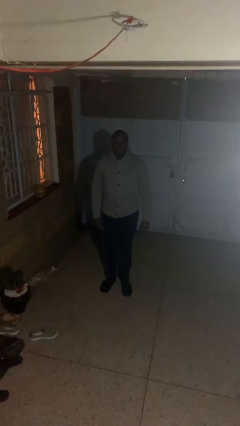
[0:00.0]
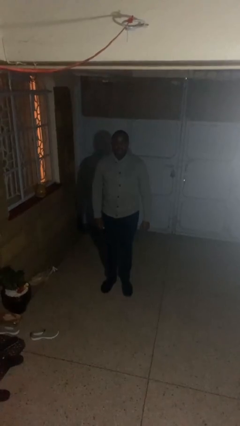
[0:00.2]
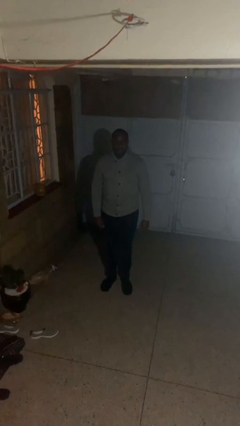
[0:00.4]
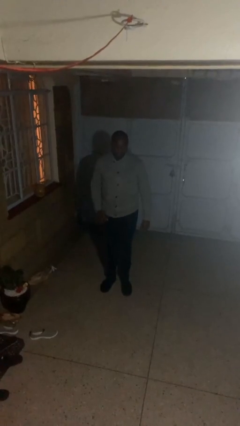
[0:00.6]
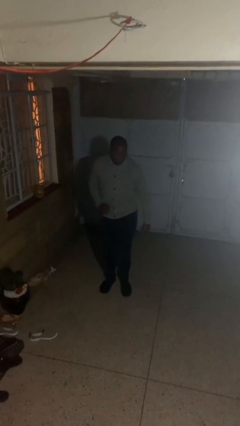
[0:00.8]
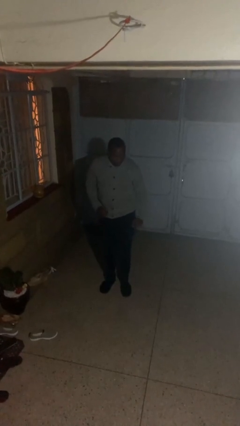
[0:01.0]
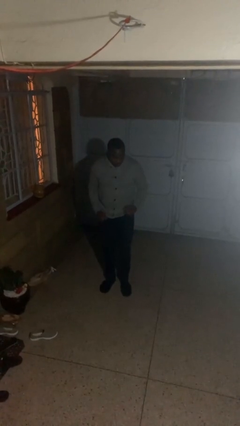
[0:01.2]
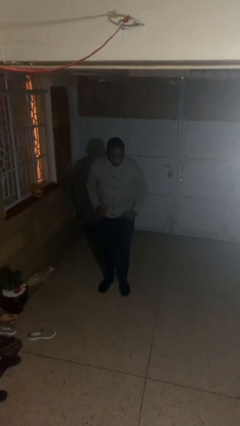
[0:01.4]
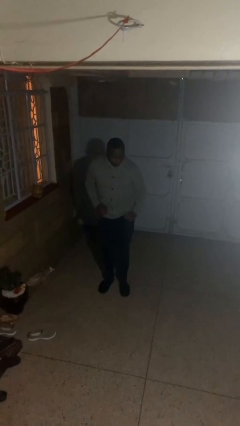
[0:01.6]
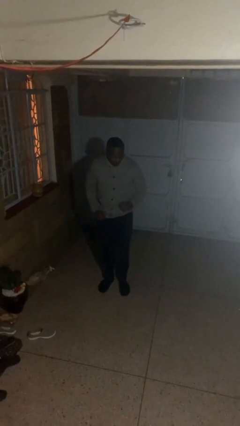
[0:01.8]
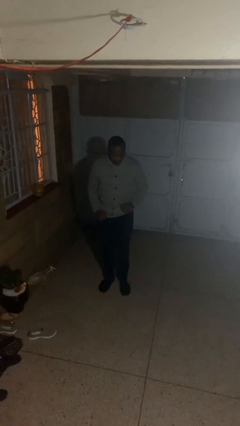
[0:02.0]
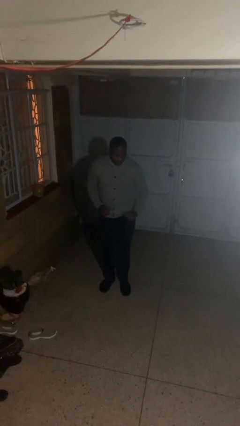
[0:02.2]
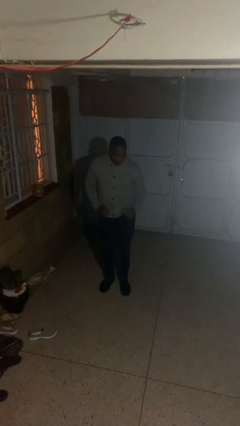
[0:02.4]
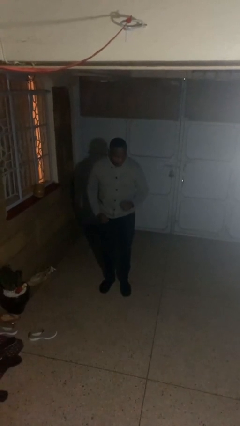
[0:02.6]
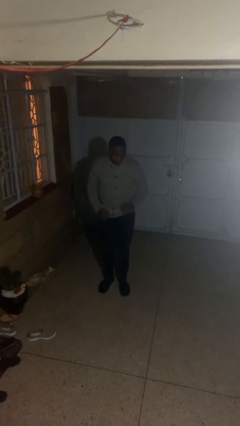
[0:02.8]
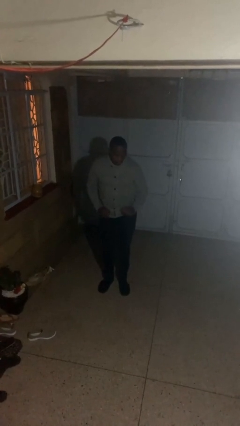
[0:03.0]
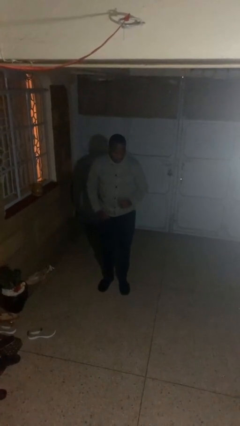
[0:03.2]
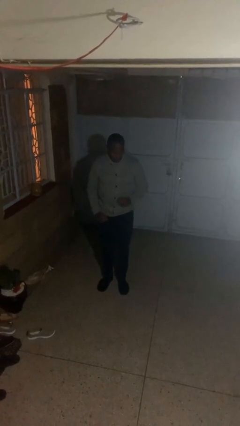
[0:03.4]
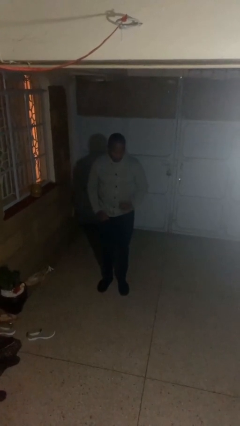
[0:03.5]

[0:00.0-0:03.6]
person dances in place

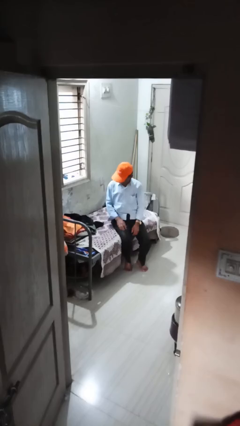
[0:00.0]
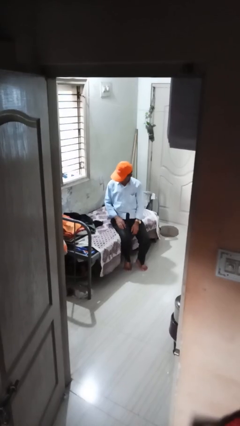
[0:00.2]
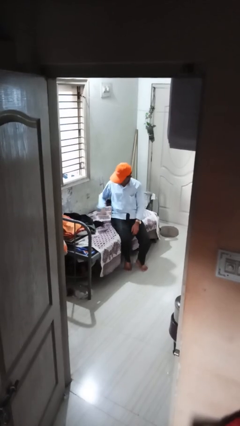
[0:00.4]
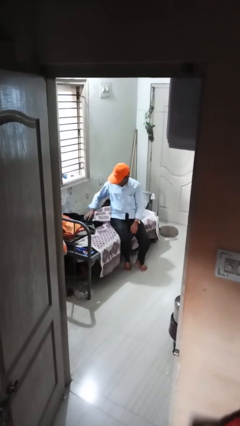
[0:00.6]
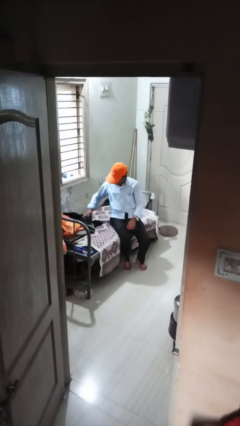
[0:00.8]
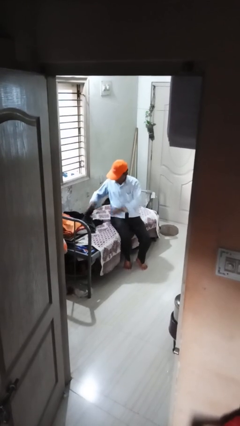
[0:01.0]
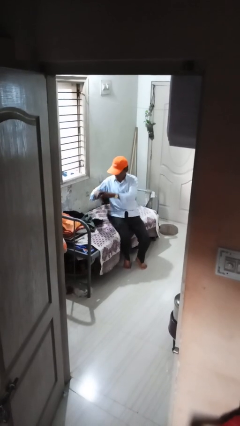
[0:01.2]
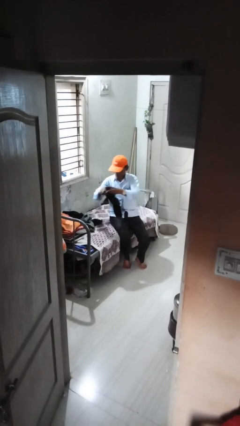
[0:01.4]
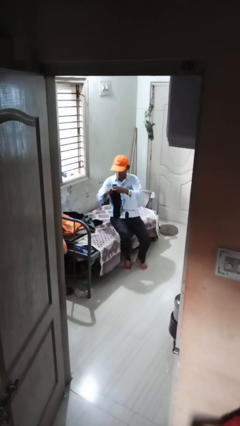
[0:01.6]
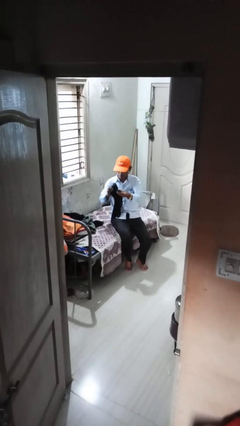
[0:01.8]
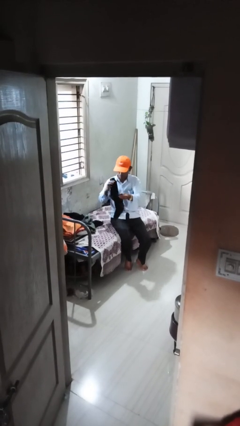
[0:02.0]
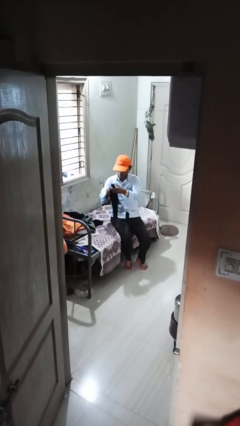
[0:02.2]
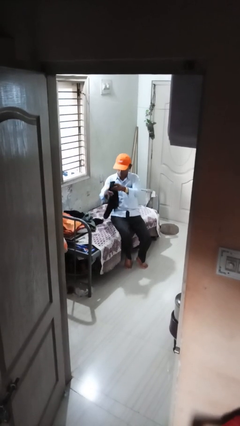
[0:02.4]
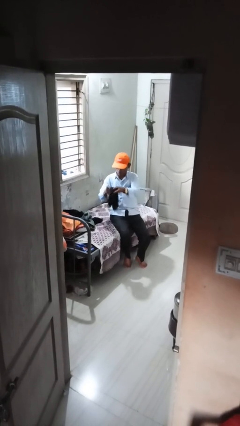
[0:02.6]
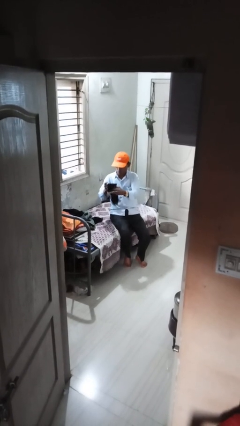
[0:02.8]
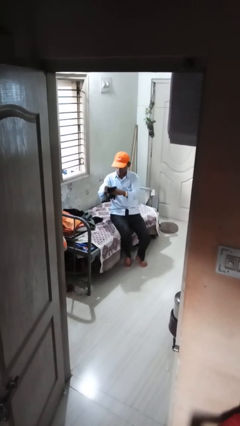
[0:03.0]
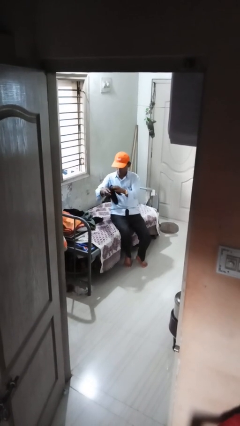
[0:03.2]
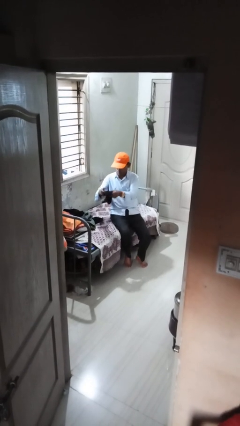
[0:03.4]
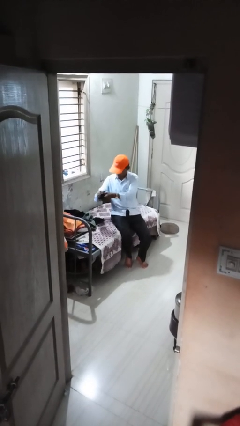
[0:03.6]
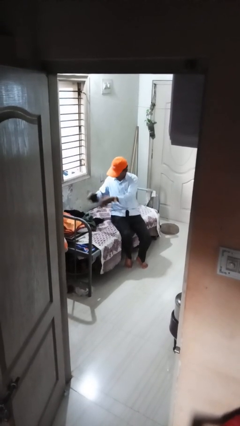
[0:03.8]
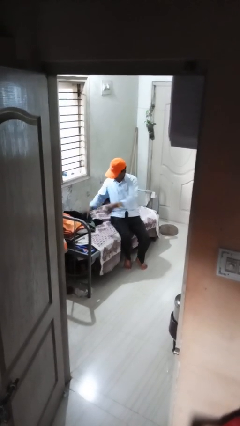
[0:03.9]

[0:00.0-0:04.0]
person folds socks

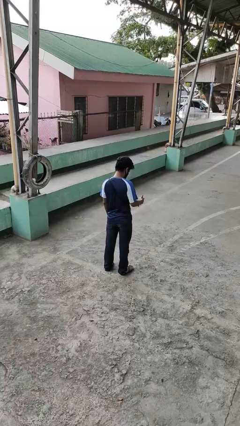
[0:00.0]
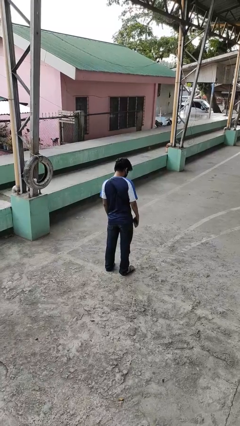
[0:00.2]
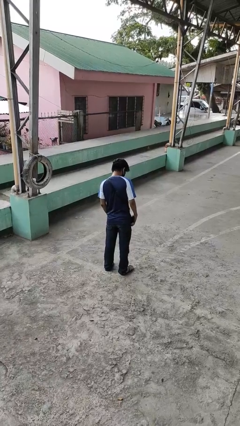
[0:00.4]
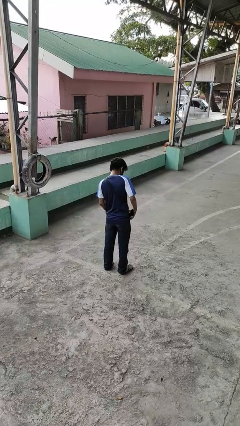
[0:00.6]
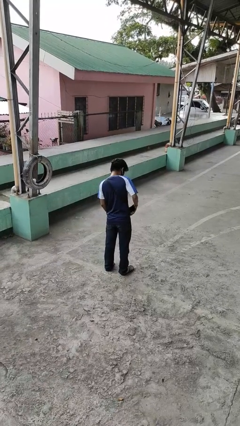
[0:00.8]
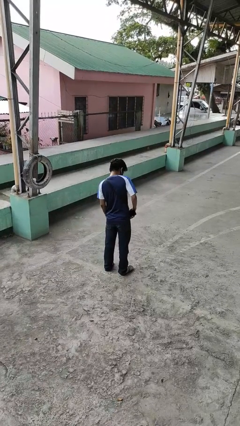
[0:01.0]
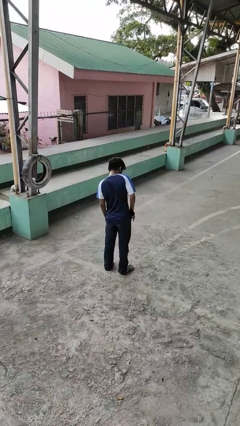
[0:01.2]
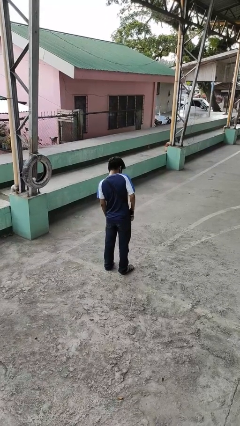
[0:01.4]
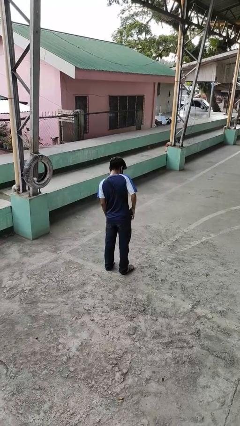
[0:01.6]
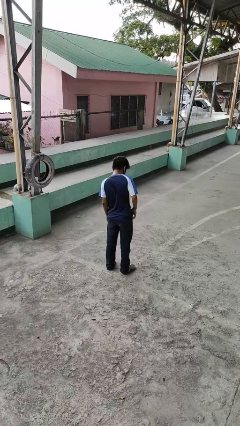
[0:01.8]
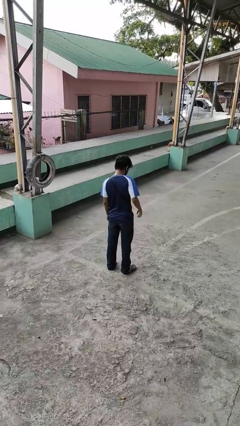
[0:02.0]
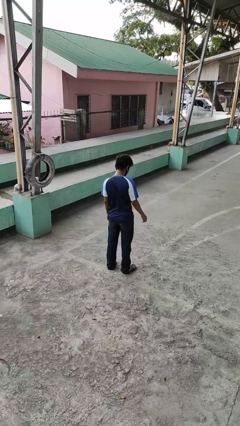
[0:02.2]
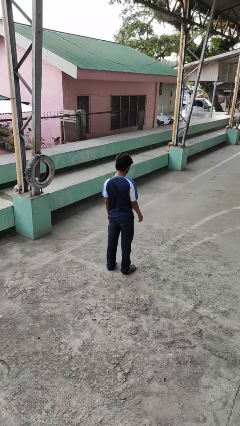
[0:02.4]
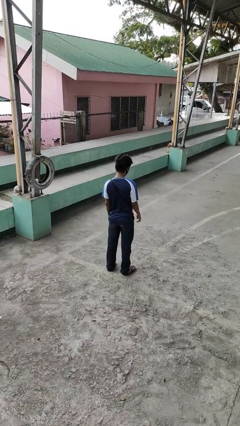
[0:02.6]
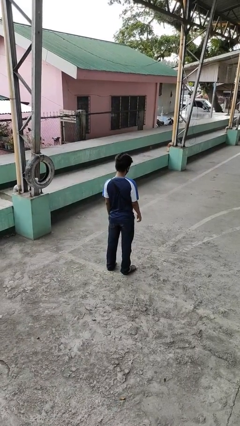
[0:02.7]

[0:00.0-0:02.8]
person puts phone into pocket

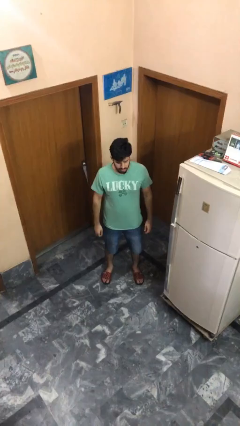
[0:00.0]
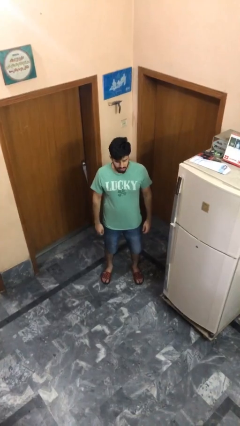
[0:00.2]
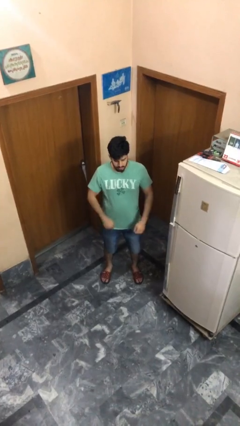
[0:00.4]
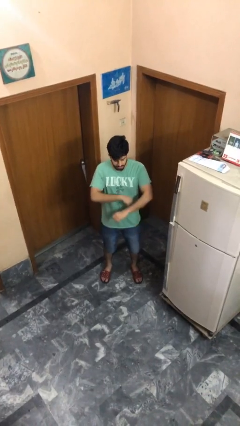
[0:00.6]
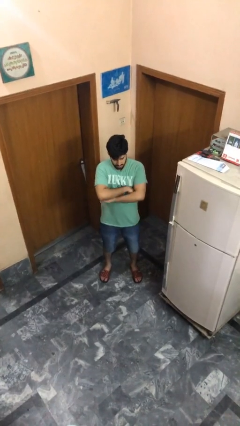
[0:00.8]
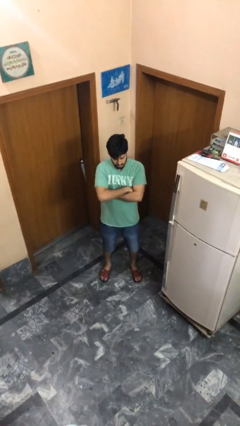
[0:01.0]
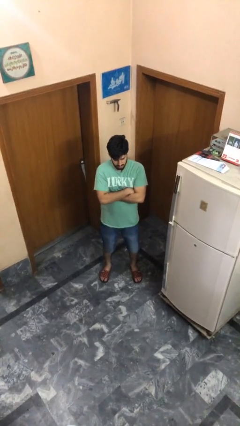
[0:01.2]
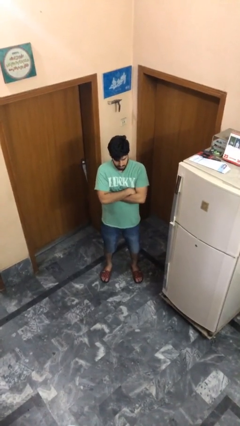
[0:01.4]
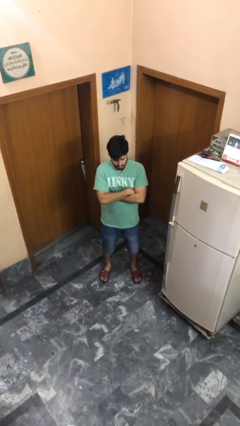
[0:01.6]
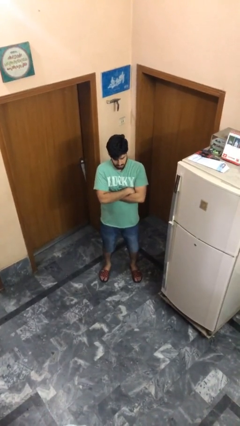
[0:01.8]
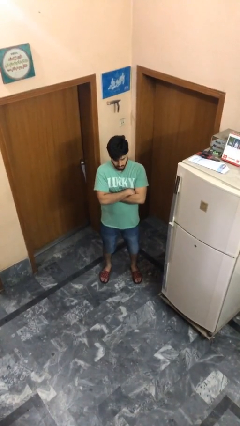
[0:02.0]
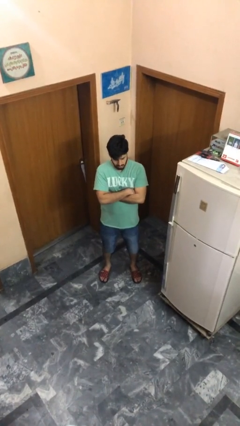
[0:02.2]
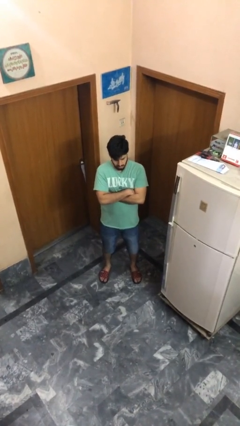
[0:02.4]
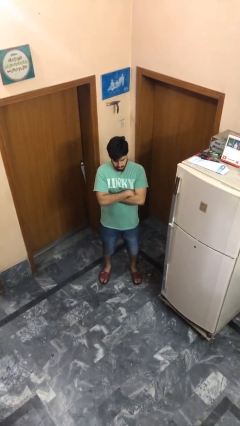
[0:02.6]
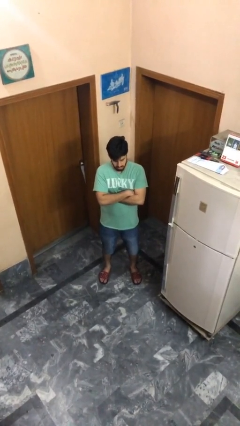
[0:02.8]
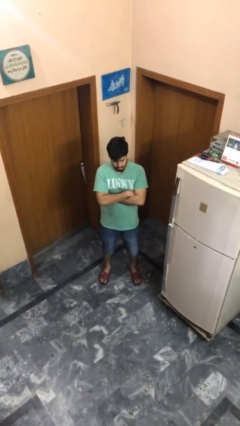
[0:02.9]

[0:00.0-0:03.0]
person crosses arms

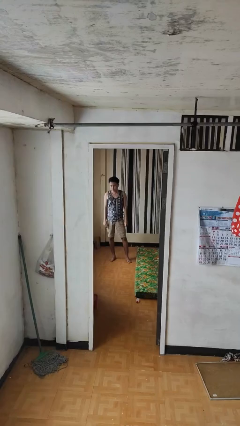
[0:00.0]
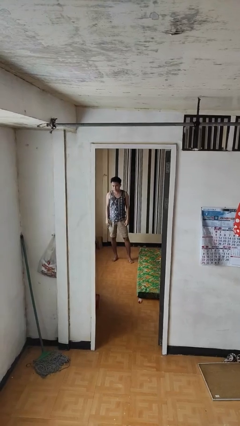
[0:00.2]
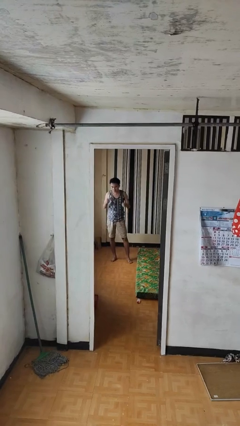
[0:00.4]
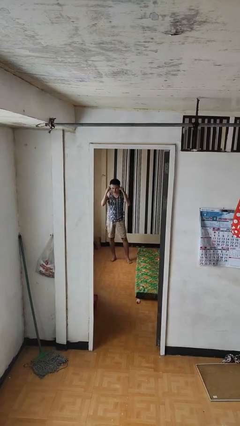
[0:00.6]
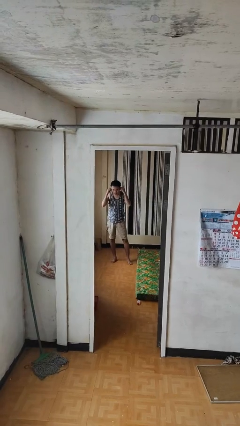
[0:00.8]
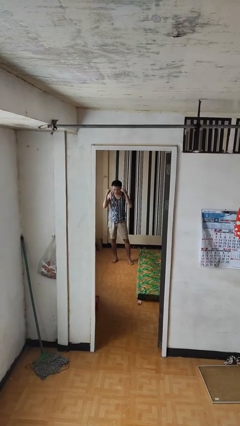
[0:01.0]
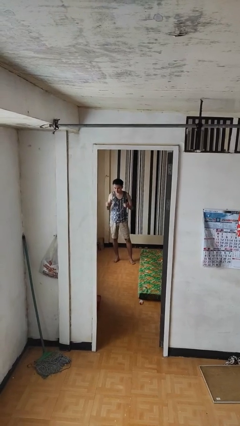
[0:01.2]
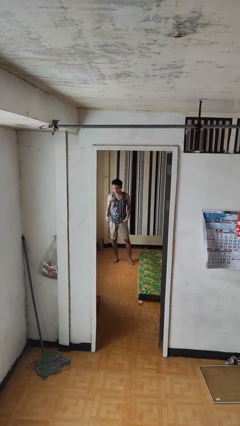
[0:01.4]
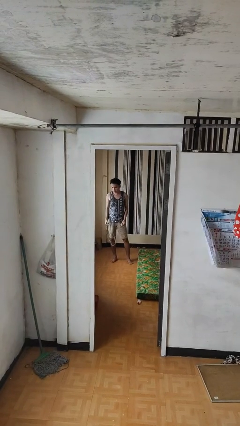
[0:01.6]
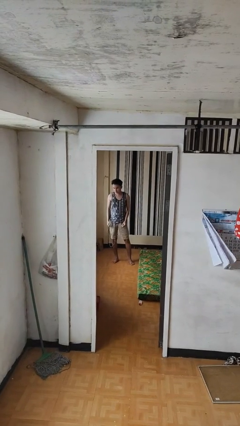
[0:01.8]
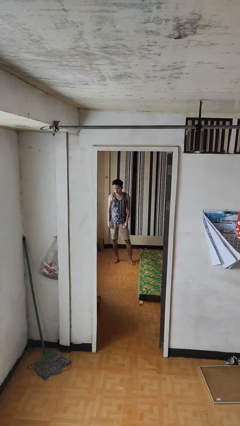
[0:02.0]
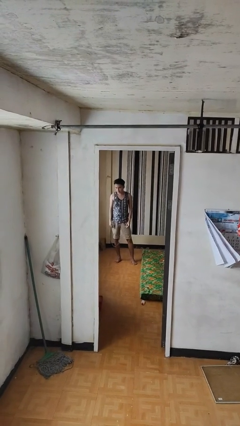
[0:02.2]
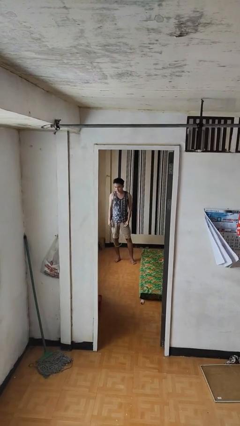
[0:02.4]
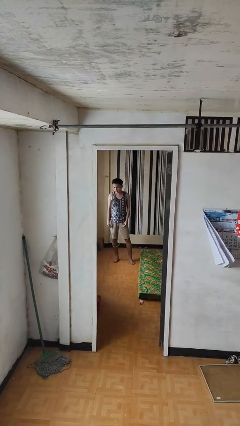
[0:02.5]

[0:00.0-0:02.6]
person takes off headphones

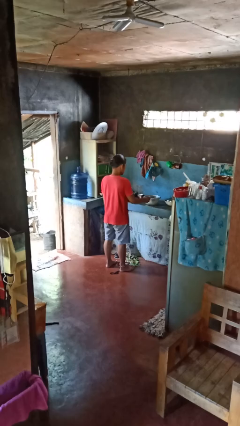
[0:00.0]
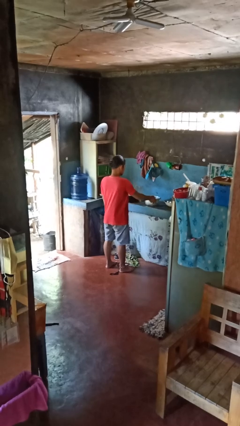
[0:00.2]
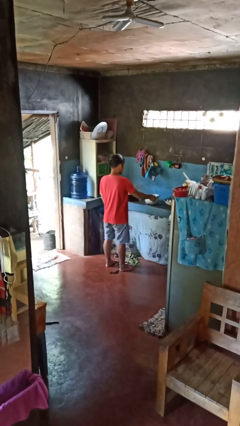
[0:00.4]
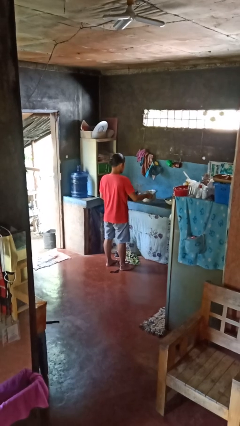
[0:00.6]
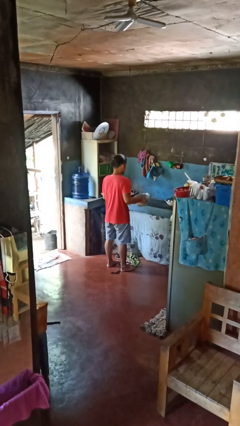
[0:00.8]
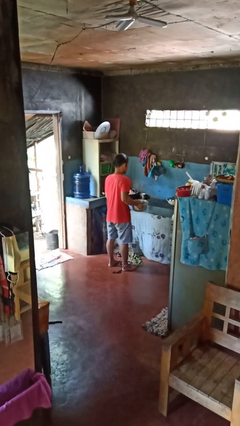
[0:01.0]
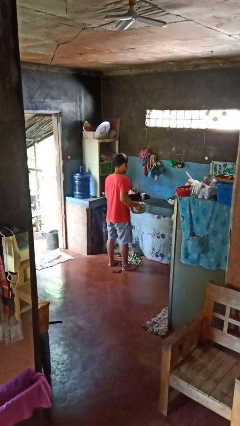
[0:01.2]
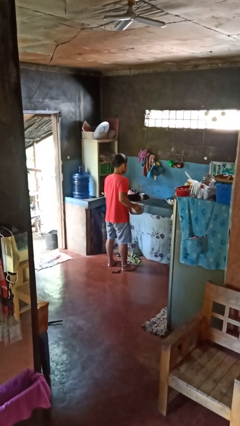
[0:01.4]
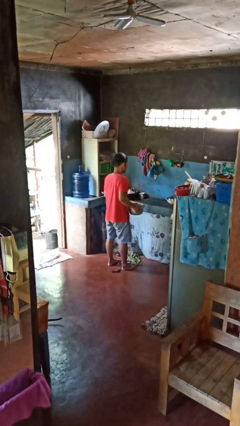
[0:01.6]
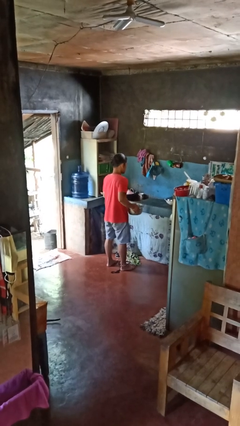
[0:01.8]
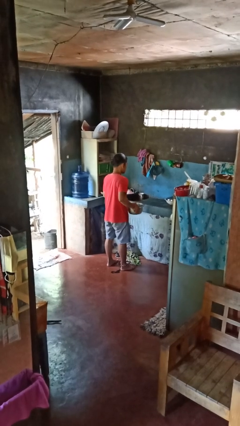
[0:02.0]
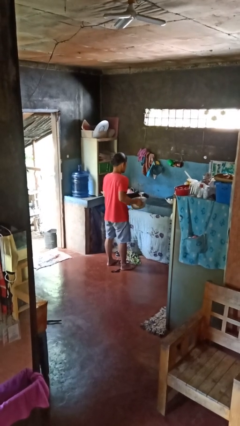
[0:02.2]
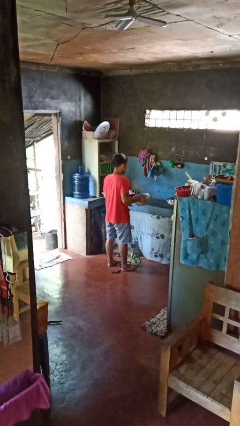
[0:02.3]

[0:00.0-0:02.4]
person picks up object from countertop
